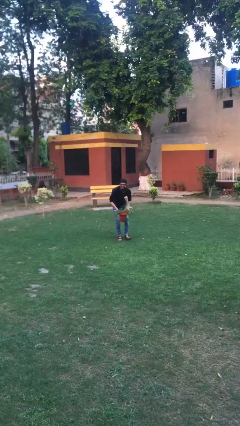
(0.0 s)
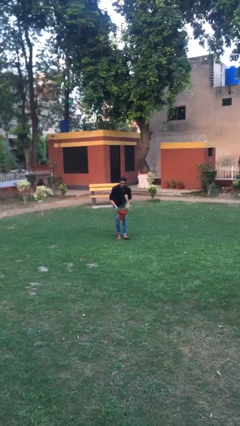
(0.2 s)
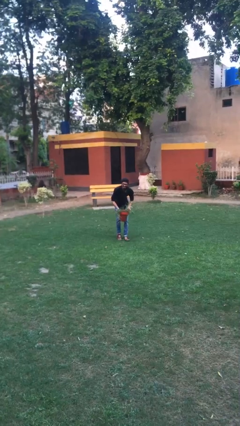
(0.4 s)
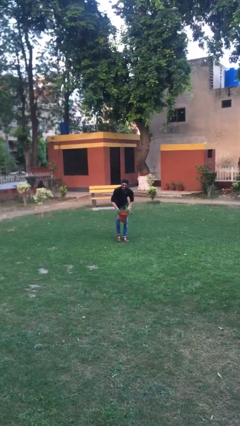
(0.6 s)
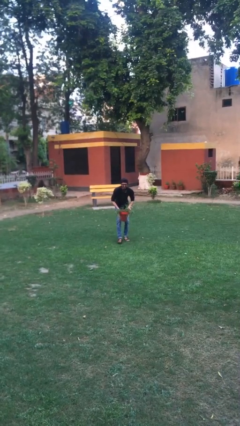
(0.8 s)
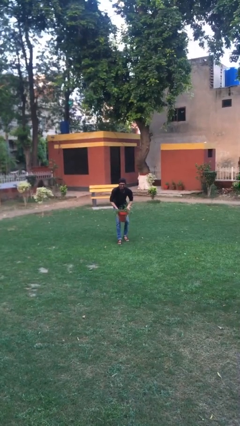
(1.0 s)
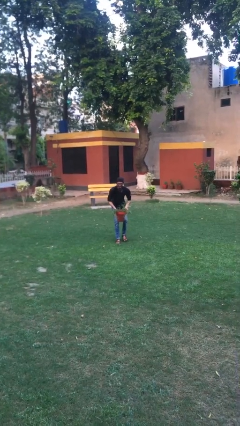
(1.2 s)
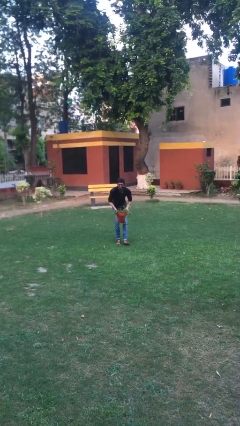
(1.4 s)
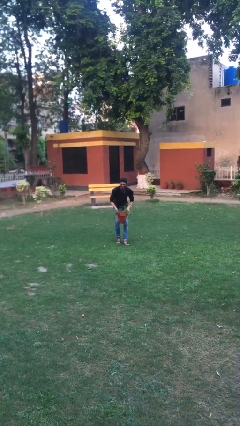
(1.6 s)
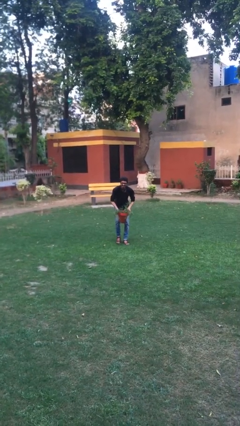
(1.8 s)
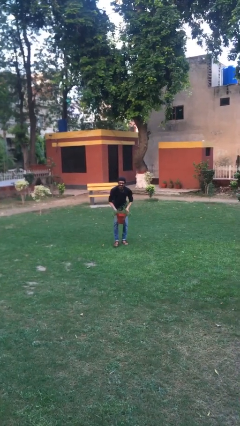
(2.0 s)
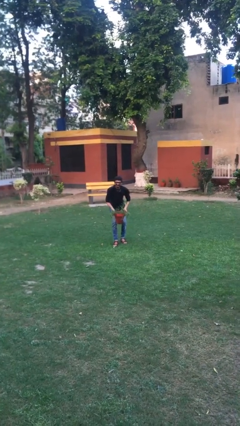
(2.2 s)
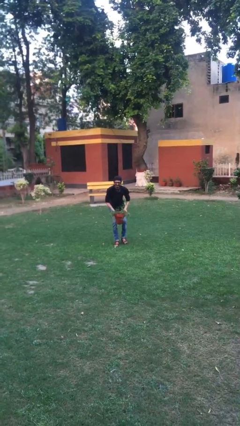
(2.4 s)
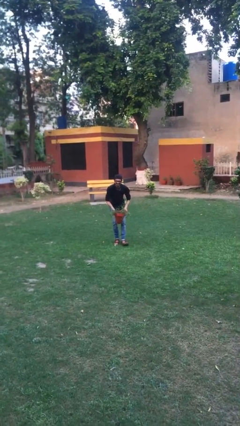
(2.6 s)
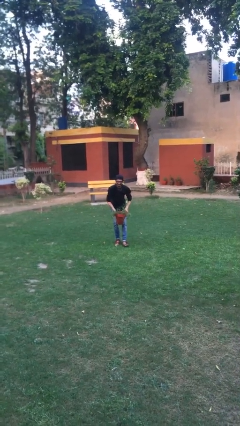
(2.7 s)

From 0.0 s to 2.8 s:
person carries heavy object

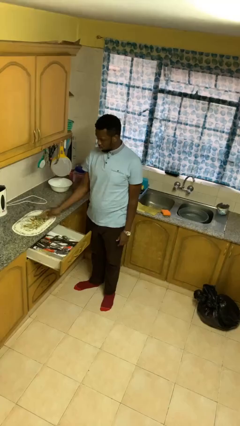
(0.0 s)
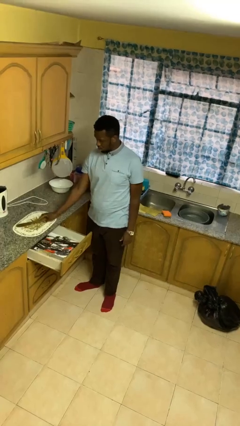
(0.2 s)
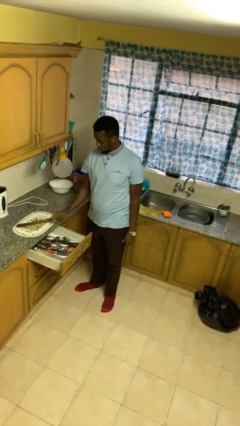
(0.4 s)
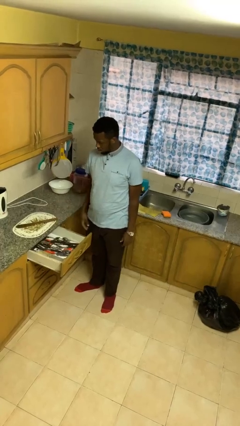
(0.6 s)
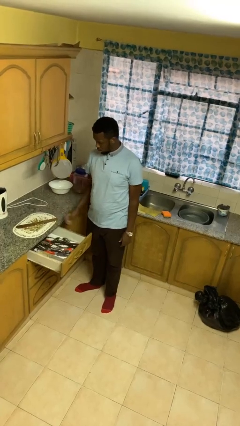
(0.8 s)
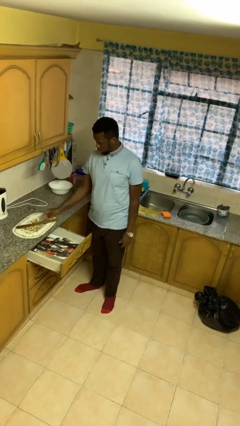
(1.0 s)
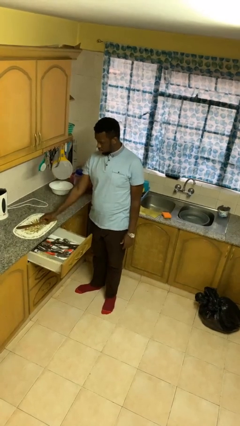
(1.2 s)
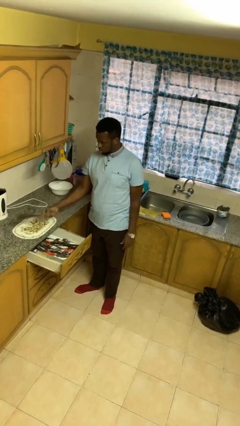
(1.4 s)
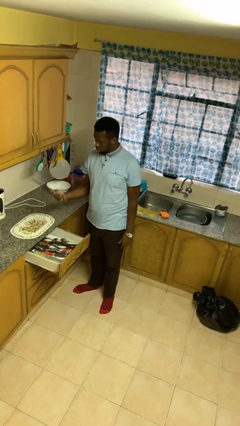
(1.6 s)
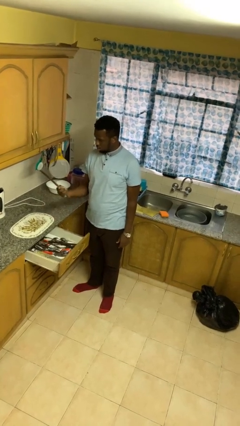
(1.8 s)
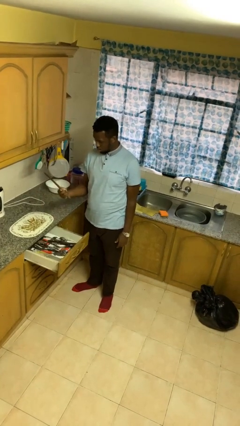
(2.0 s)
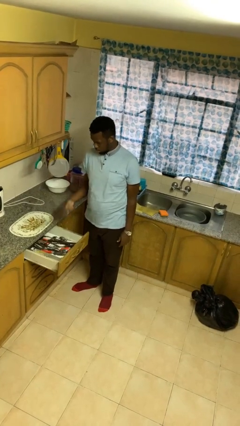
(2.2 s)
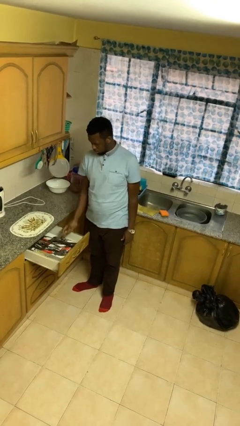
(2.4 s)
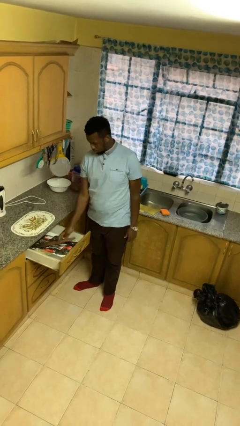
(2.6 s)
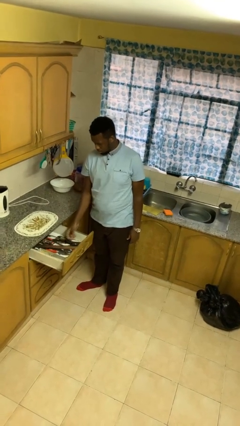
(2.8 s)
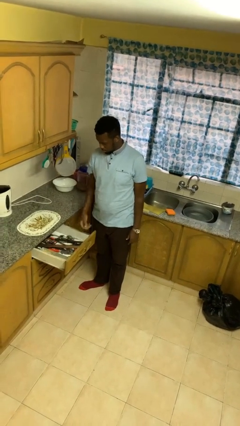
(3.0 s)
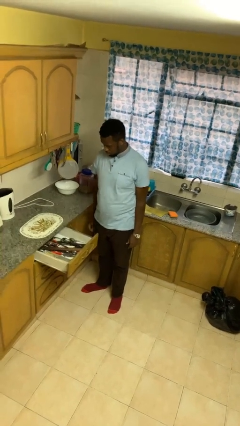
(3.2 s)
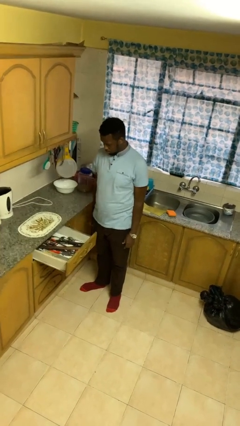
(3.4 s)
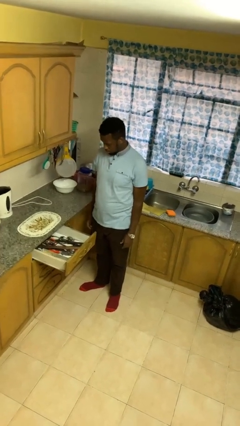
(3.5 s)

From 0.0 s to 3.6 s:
person puts object into kitchen drawer

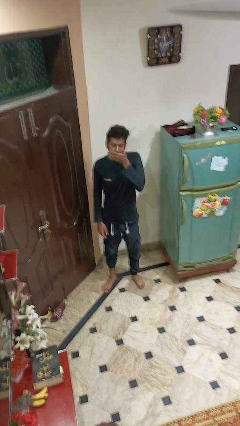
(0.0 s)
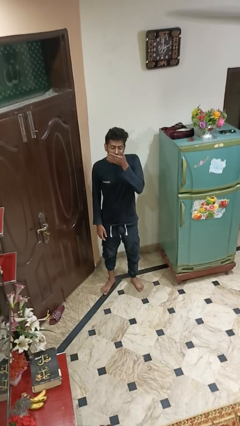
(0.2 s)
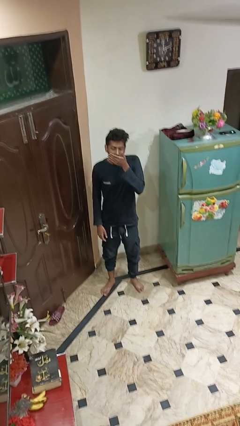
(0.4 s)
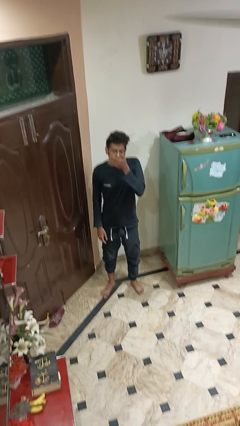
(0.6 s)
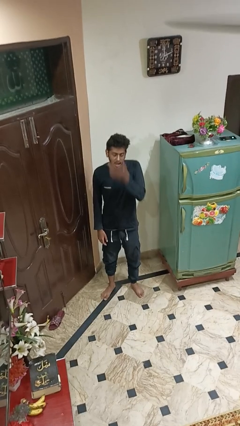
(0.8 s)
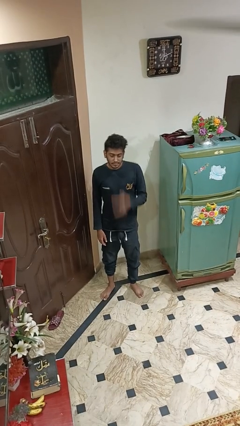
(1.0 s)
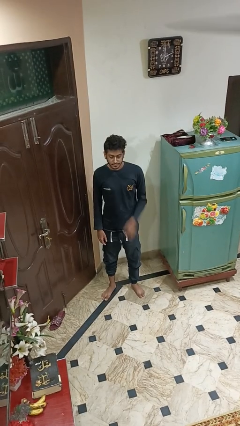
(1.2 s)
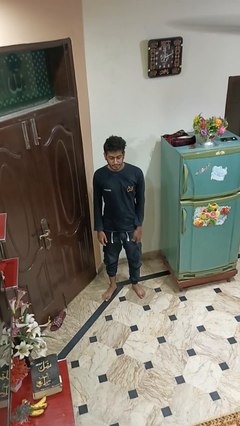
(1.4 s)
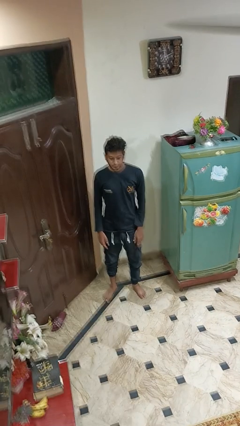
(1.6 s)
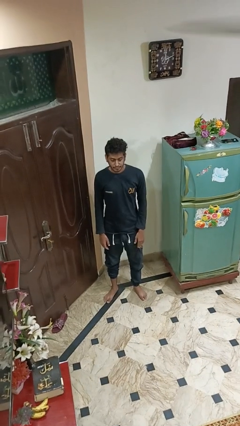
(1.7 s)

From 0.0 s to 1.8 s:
person yawns

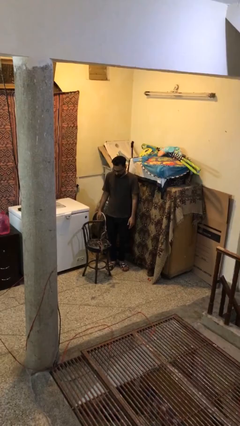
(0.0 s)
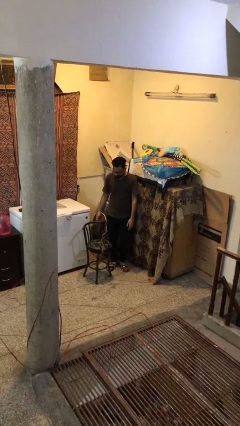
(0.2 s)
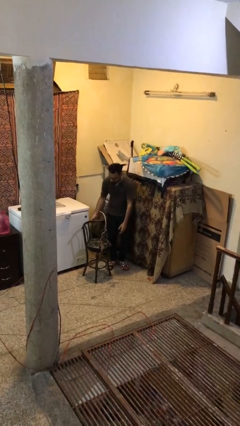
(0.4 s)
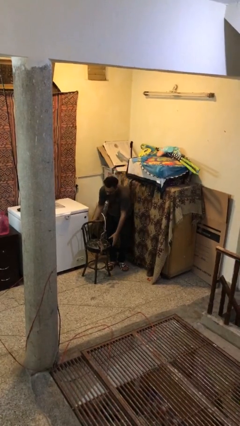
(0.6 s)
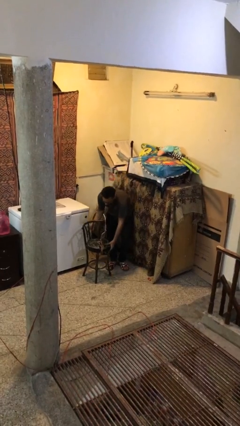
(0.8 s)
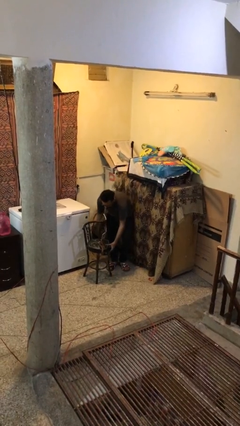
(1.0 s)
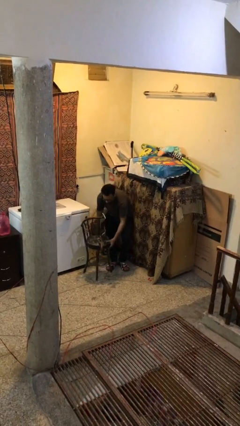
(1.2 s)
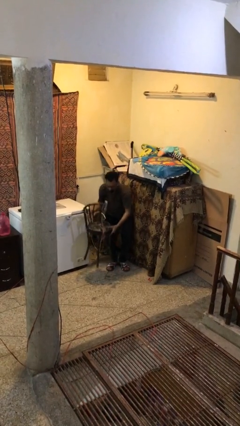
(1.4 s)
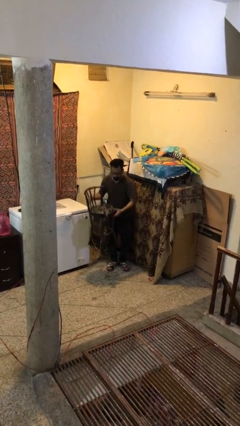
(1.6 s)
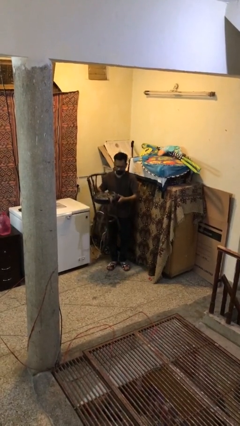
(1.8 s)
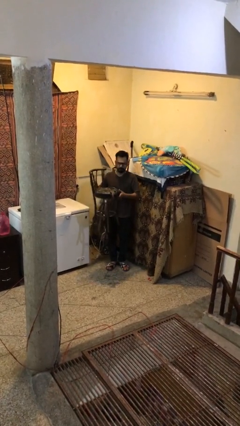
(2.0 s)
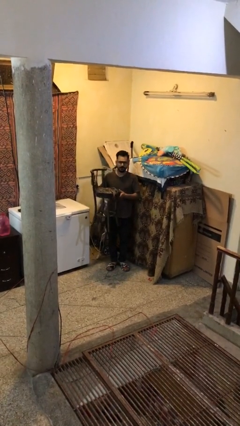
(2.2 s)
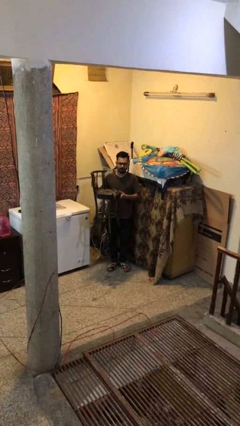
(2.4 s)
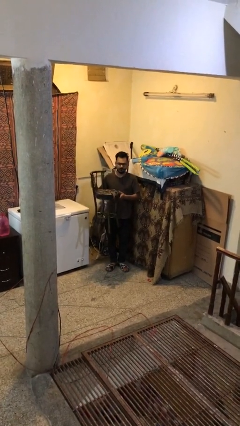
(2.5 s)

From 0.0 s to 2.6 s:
person picks up object from floor

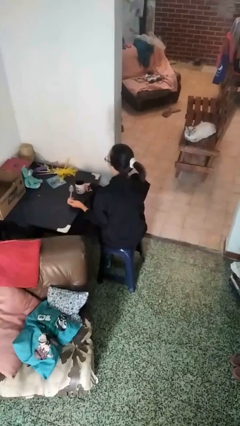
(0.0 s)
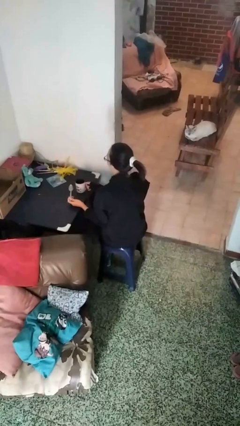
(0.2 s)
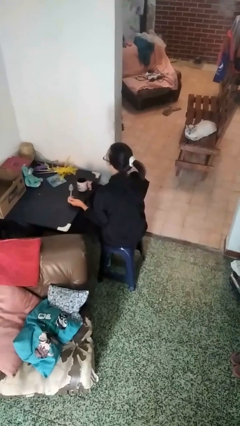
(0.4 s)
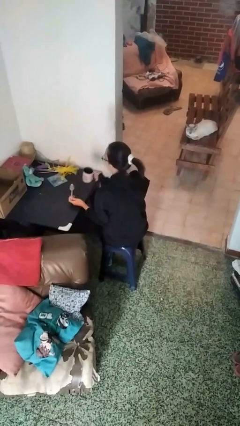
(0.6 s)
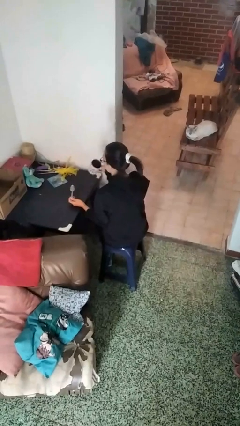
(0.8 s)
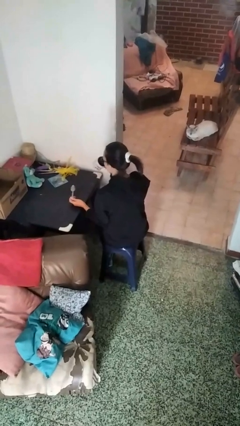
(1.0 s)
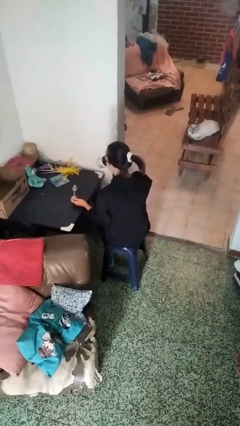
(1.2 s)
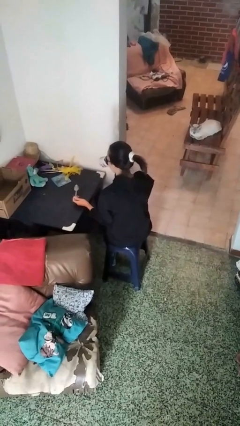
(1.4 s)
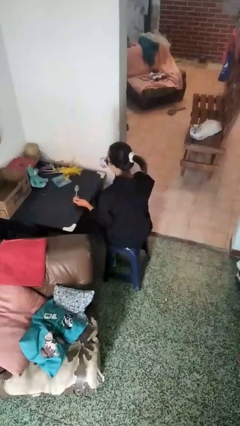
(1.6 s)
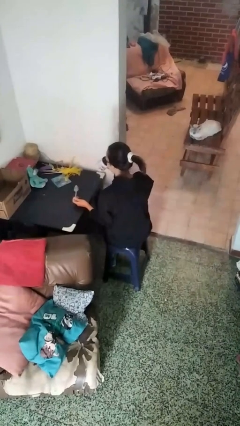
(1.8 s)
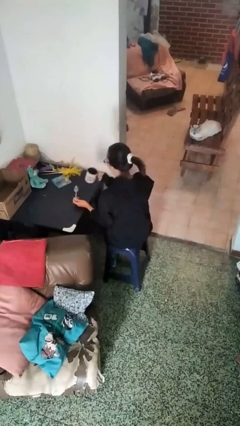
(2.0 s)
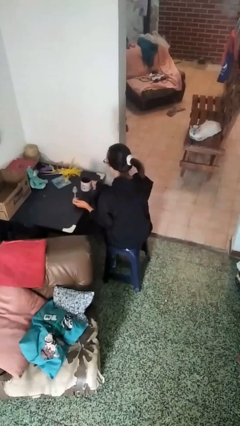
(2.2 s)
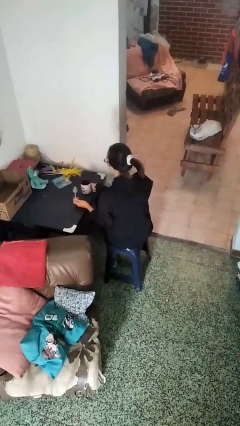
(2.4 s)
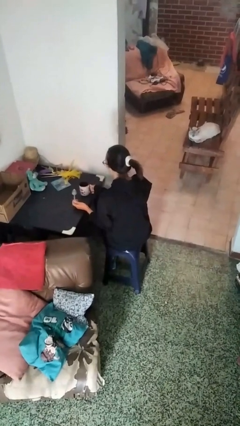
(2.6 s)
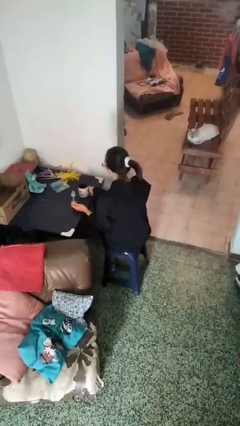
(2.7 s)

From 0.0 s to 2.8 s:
person drinks from mug

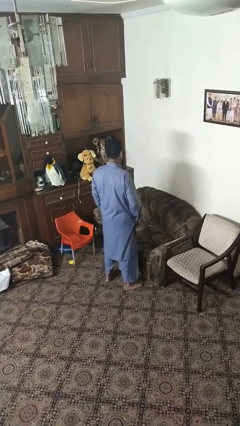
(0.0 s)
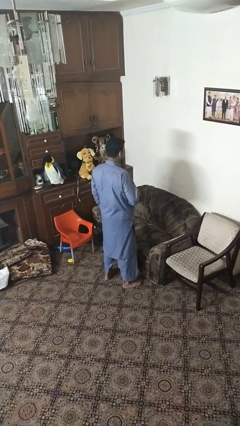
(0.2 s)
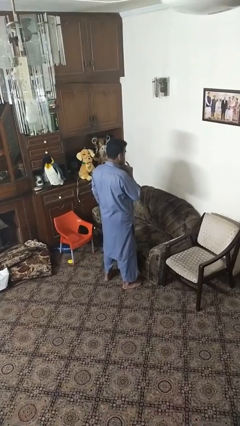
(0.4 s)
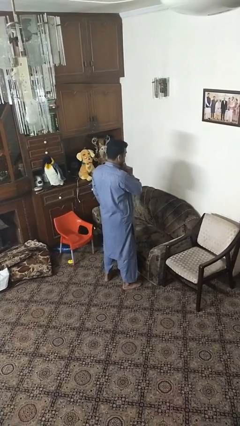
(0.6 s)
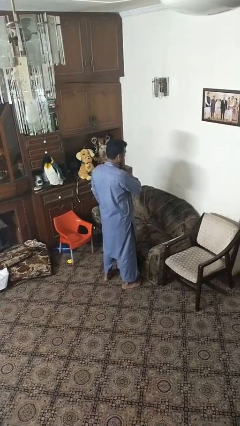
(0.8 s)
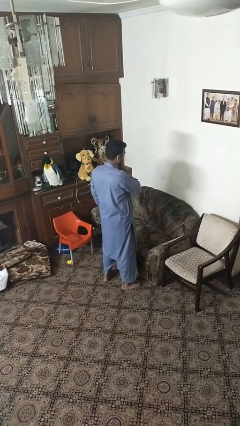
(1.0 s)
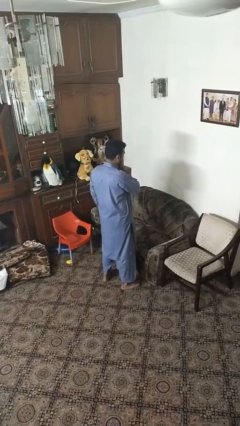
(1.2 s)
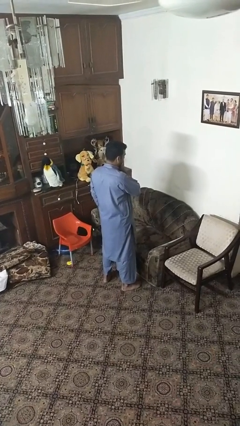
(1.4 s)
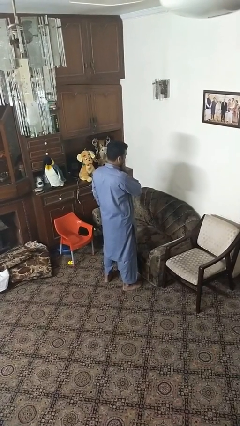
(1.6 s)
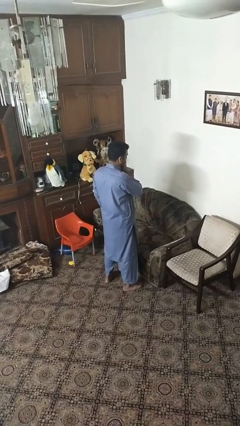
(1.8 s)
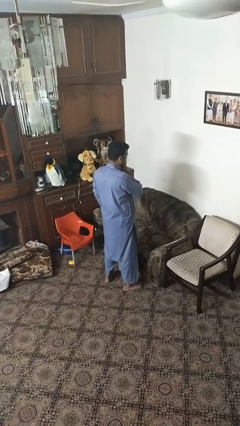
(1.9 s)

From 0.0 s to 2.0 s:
person strokes chin

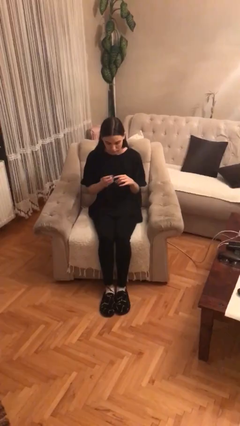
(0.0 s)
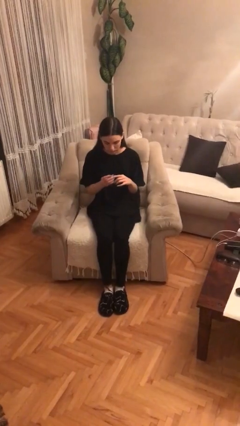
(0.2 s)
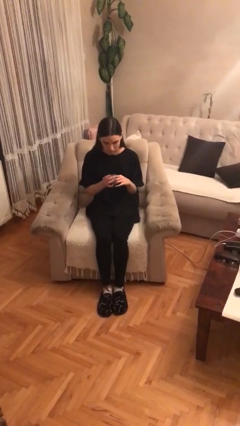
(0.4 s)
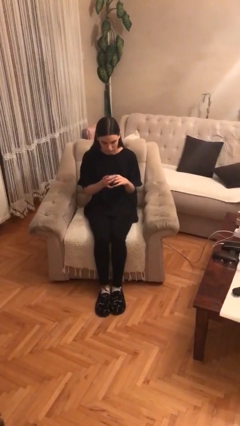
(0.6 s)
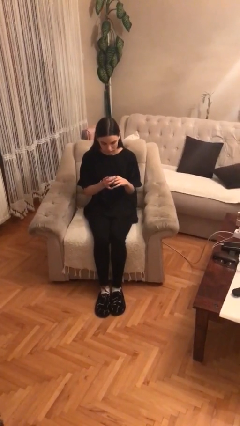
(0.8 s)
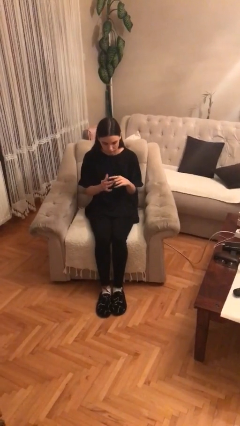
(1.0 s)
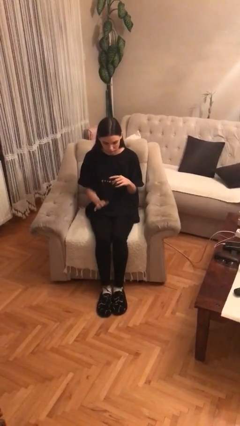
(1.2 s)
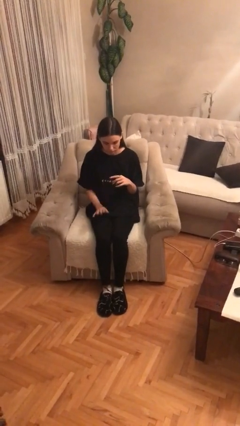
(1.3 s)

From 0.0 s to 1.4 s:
person puts on ring
